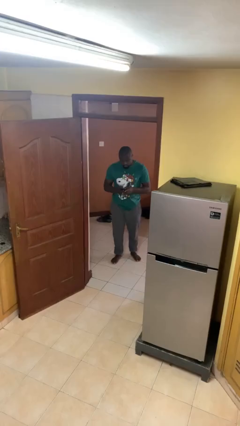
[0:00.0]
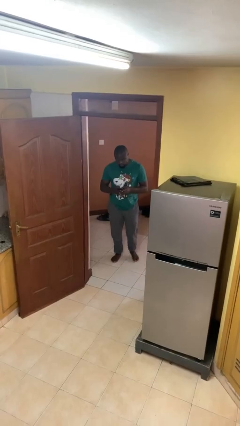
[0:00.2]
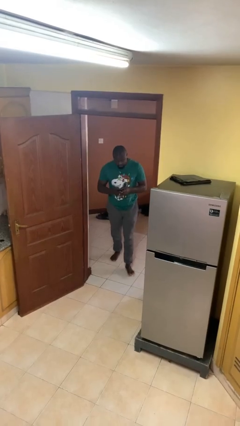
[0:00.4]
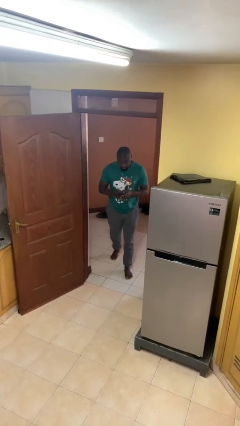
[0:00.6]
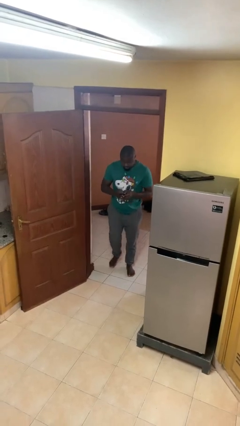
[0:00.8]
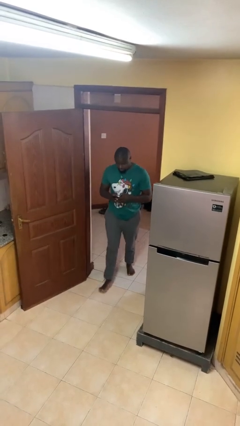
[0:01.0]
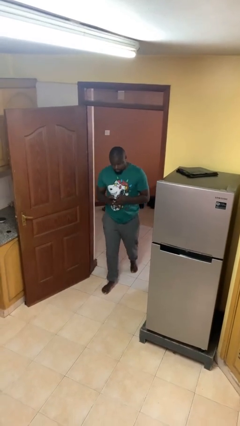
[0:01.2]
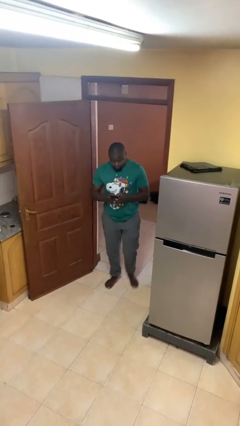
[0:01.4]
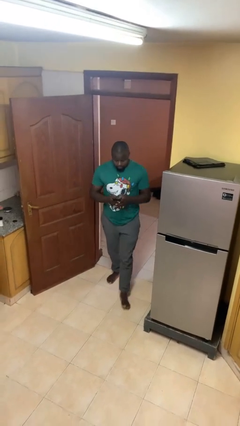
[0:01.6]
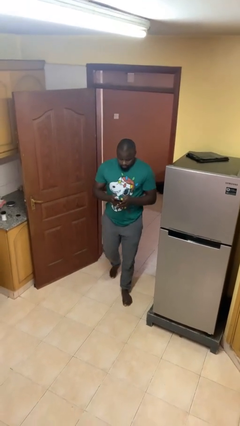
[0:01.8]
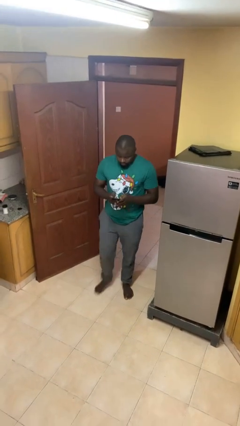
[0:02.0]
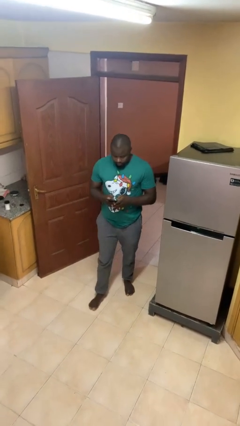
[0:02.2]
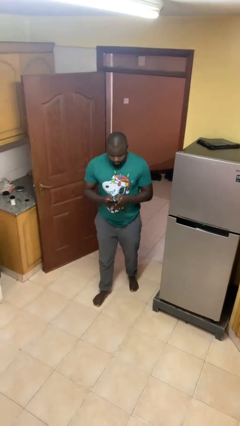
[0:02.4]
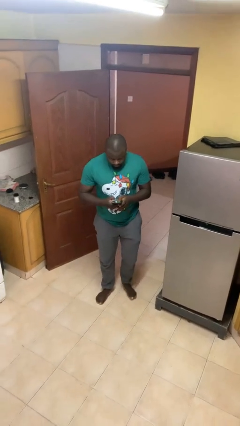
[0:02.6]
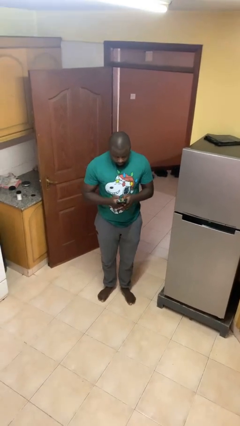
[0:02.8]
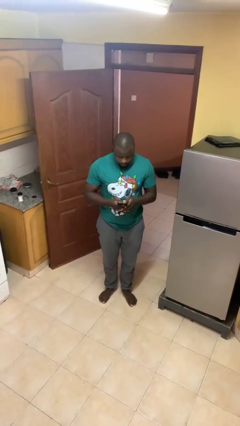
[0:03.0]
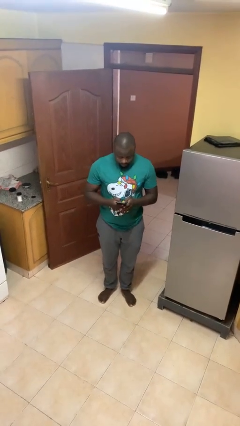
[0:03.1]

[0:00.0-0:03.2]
person enters scene through structure

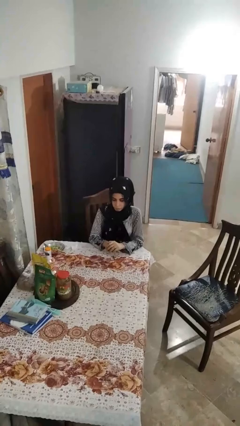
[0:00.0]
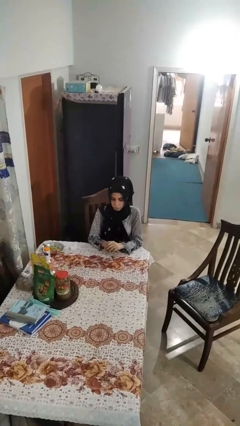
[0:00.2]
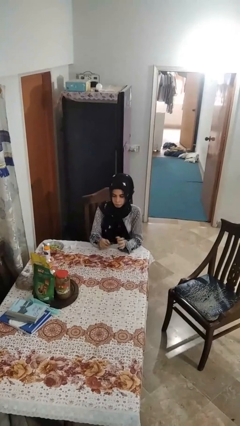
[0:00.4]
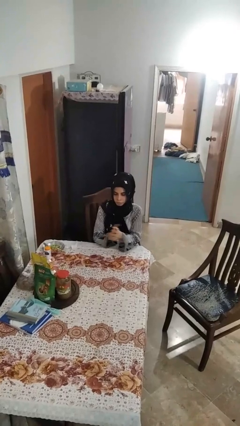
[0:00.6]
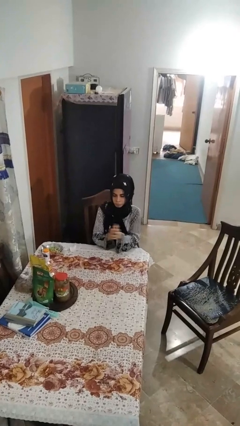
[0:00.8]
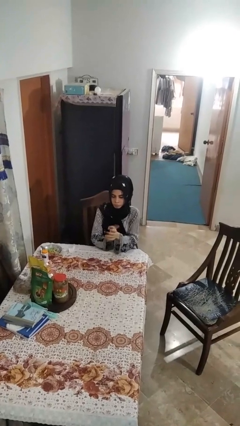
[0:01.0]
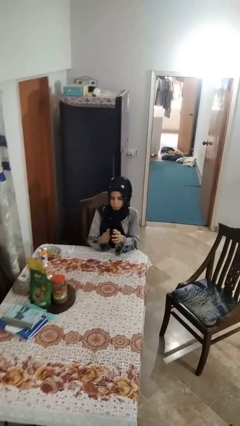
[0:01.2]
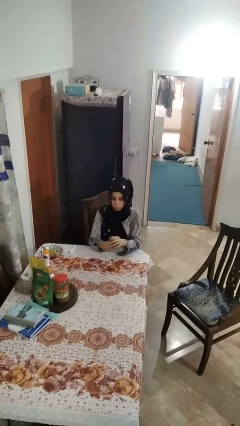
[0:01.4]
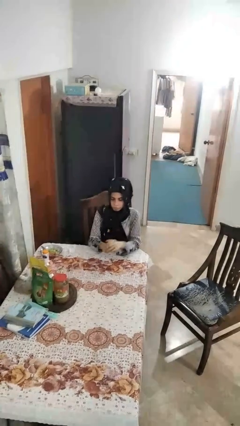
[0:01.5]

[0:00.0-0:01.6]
person claps hands

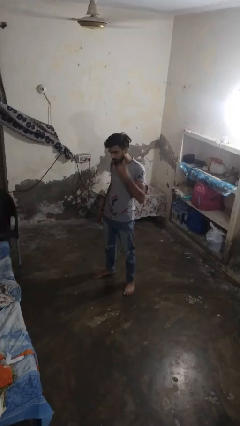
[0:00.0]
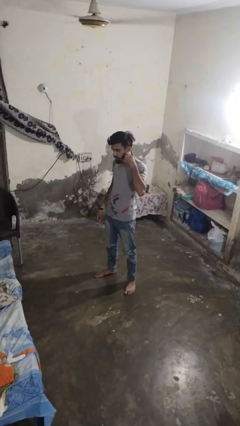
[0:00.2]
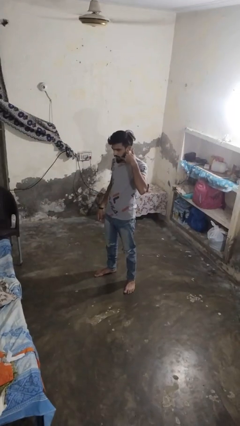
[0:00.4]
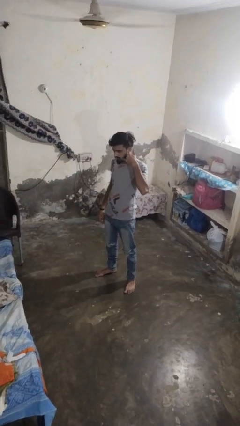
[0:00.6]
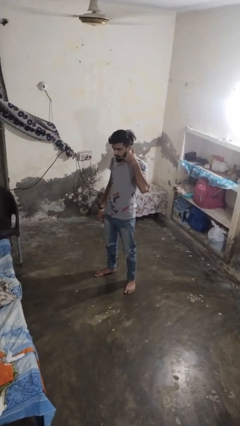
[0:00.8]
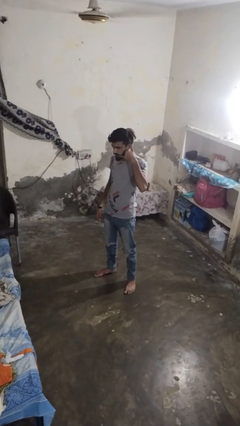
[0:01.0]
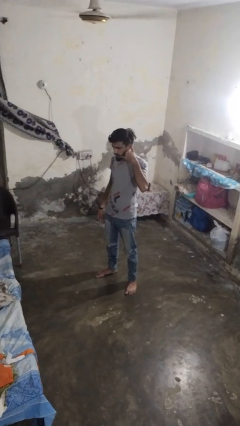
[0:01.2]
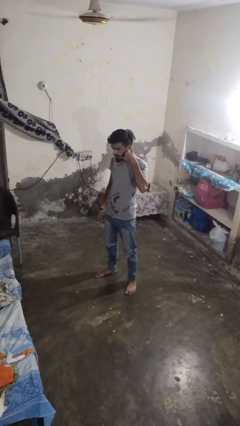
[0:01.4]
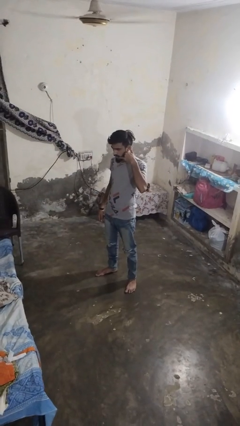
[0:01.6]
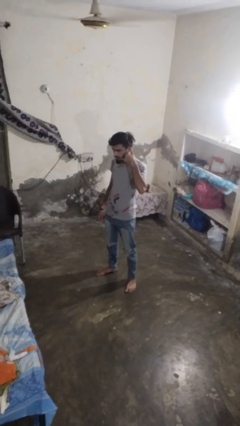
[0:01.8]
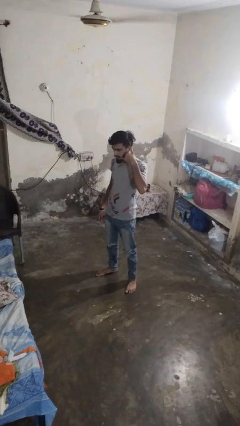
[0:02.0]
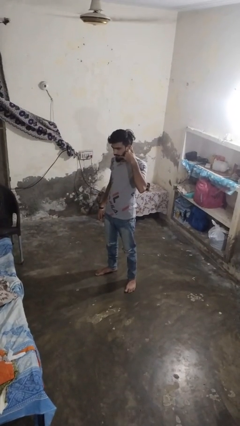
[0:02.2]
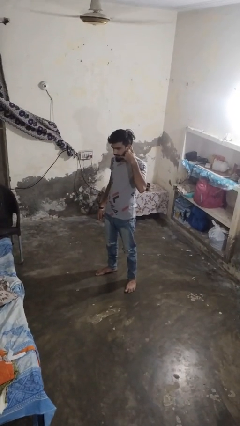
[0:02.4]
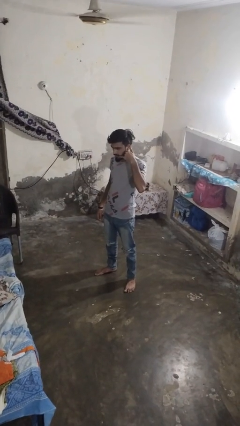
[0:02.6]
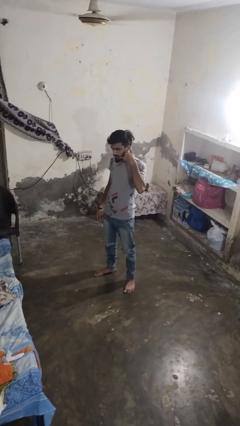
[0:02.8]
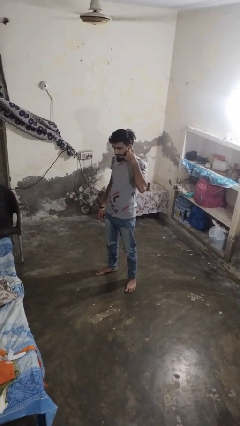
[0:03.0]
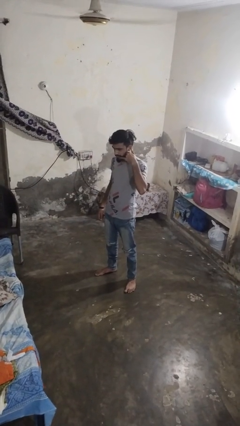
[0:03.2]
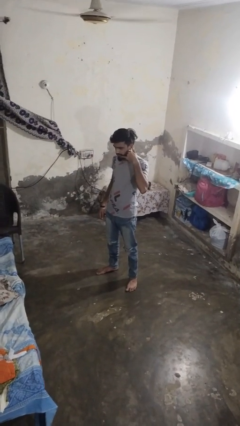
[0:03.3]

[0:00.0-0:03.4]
person gestures call me

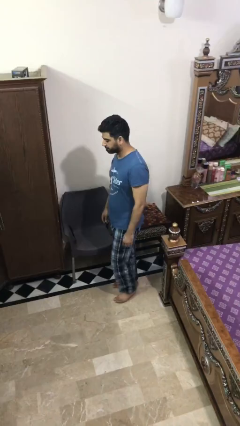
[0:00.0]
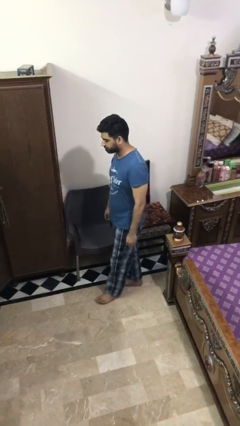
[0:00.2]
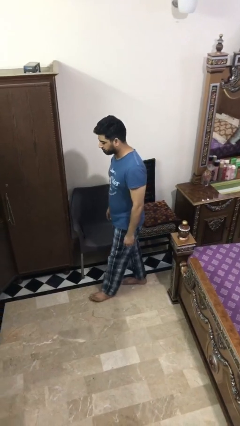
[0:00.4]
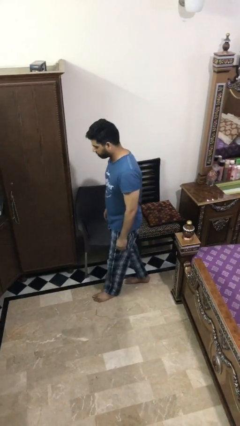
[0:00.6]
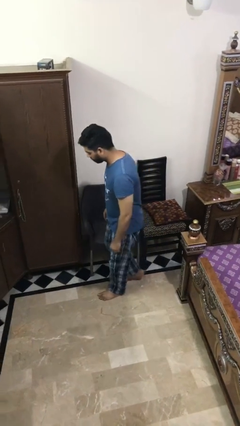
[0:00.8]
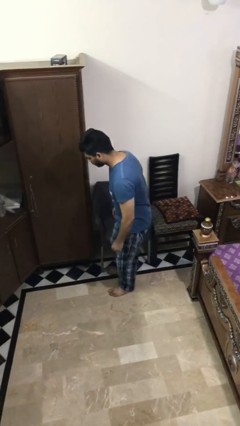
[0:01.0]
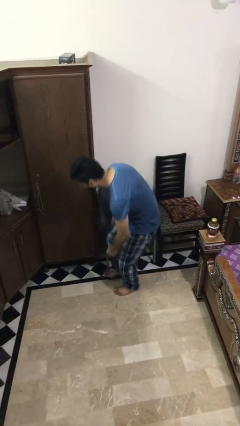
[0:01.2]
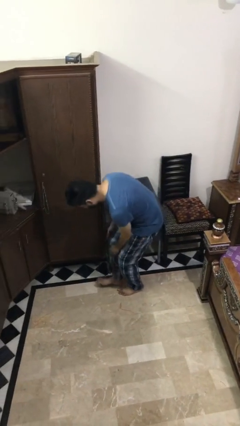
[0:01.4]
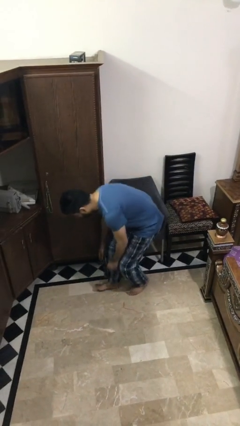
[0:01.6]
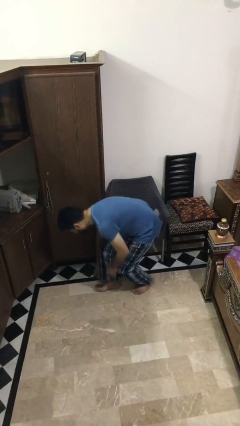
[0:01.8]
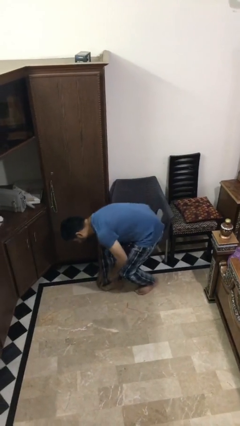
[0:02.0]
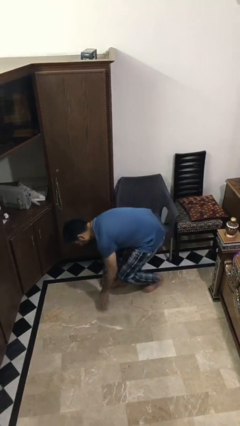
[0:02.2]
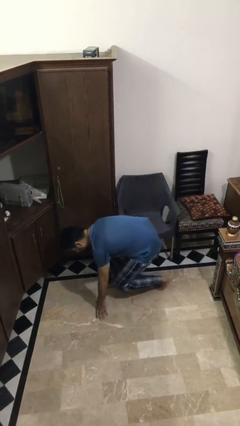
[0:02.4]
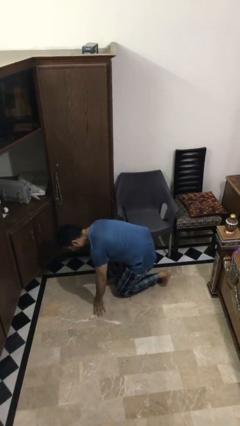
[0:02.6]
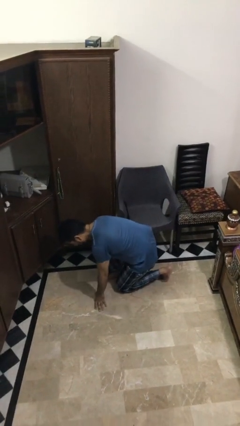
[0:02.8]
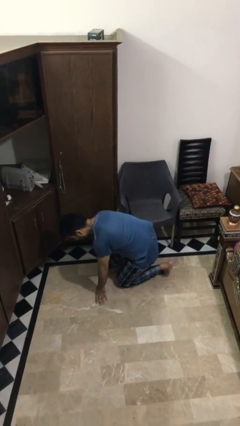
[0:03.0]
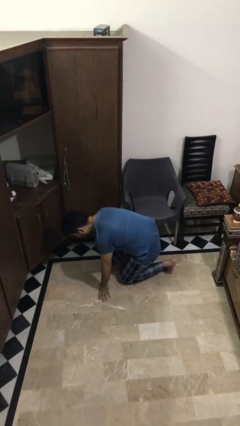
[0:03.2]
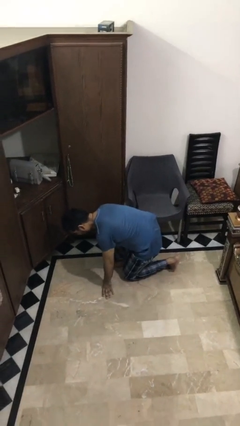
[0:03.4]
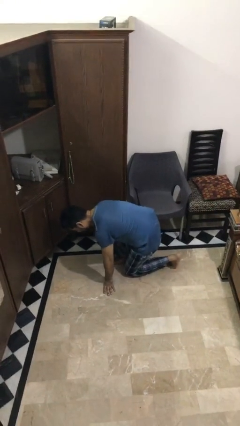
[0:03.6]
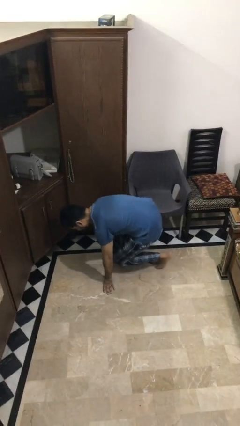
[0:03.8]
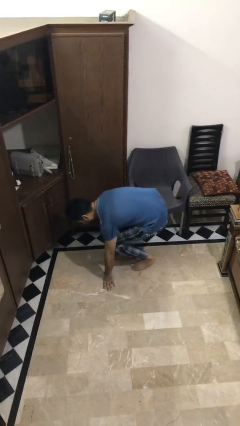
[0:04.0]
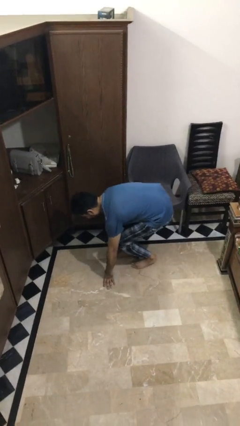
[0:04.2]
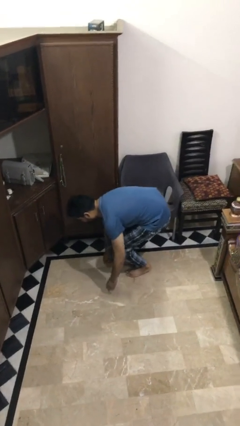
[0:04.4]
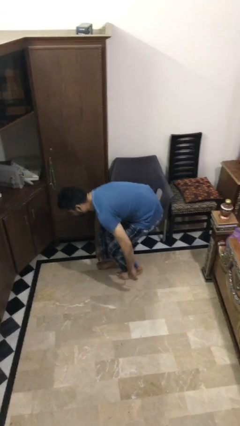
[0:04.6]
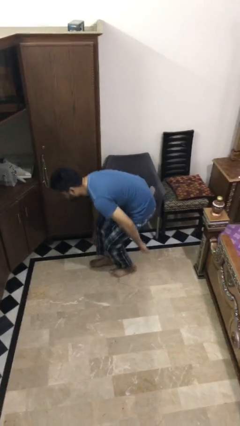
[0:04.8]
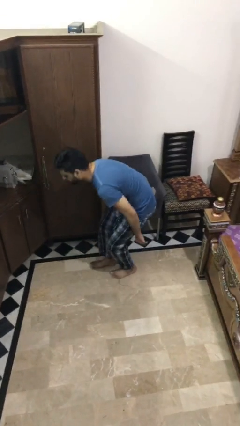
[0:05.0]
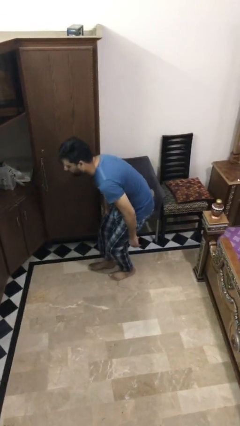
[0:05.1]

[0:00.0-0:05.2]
person stubs toe

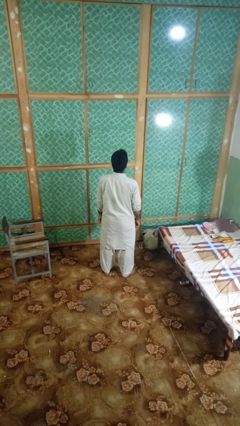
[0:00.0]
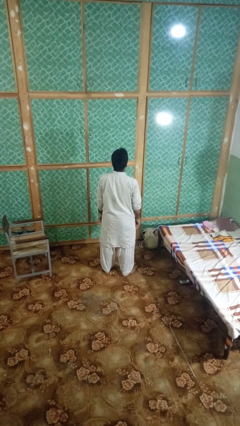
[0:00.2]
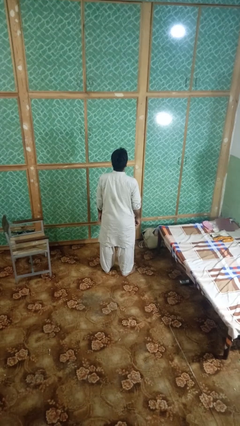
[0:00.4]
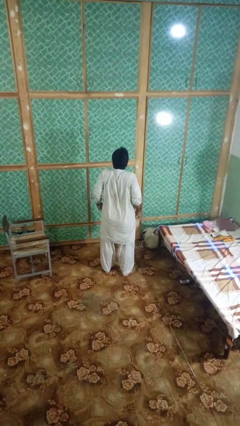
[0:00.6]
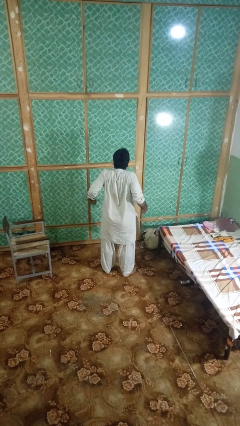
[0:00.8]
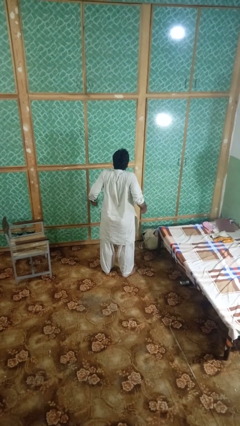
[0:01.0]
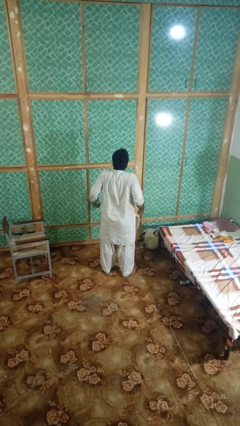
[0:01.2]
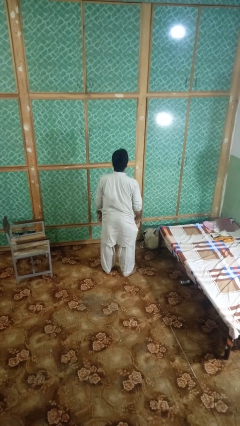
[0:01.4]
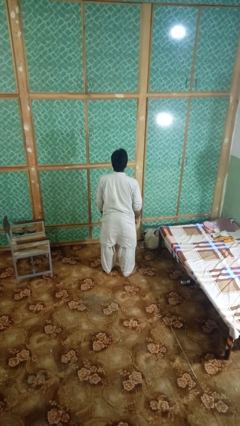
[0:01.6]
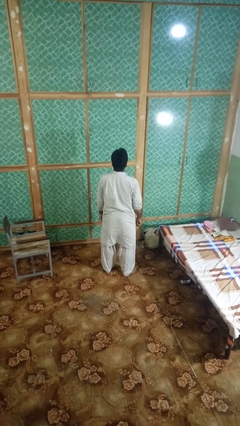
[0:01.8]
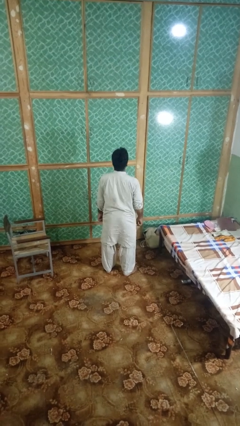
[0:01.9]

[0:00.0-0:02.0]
person shrugs

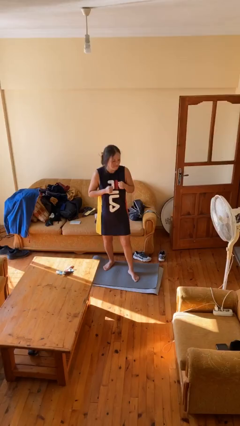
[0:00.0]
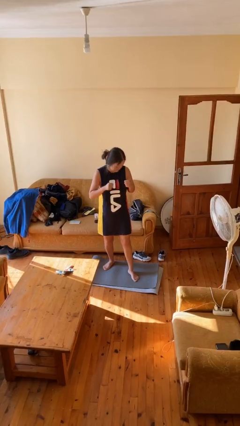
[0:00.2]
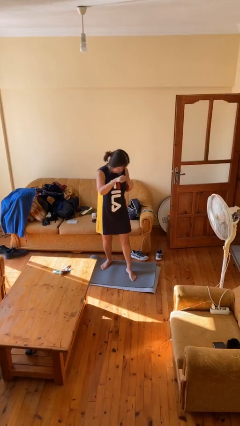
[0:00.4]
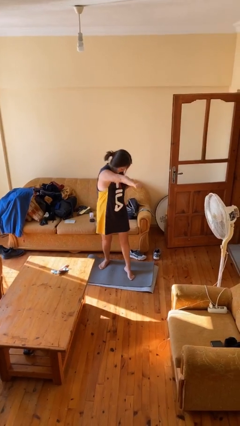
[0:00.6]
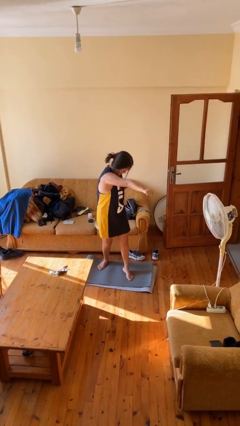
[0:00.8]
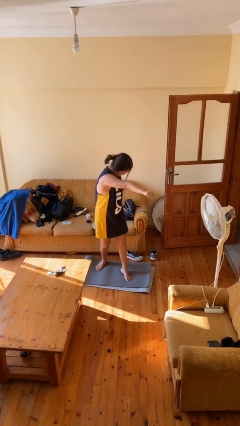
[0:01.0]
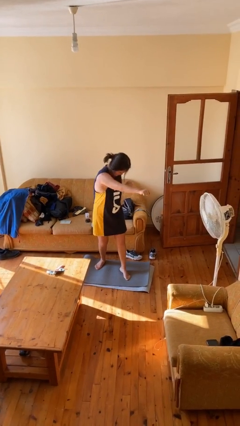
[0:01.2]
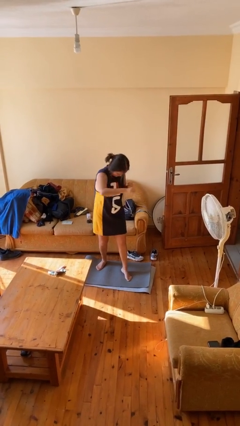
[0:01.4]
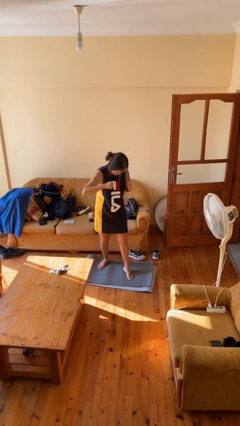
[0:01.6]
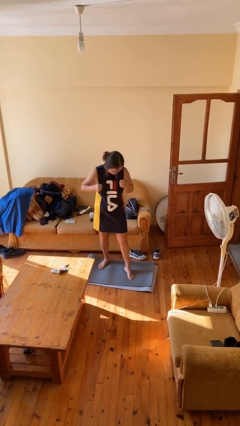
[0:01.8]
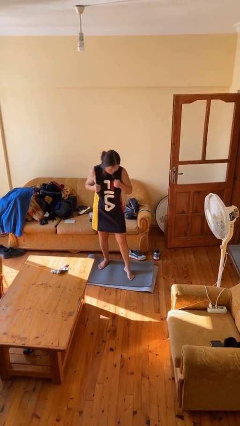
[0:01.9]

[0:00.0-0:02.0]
person punches
